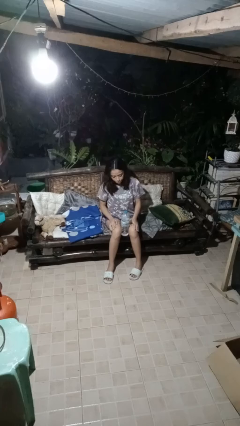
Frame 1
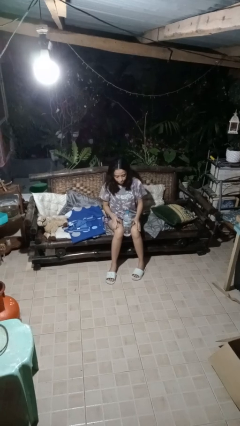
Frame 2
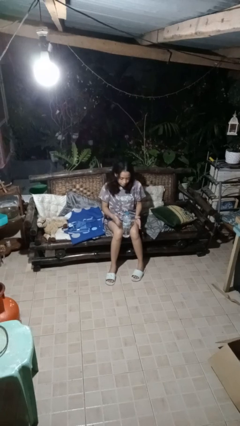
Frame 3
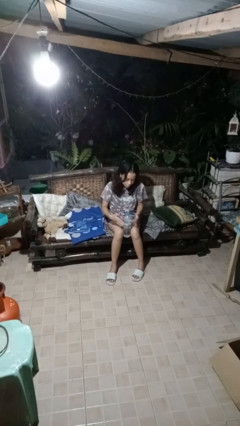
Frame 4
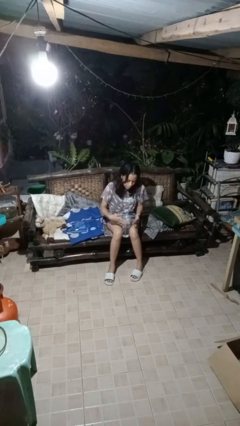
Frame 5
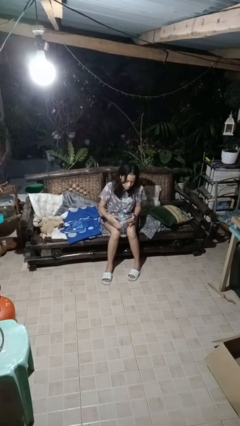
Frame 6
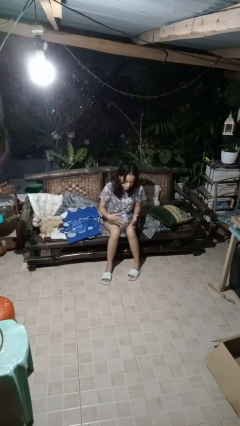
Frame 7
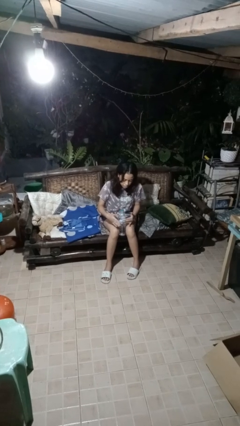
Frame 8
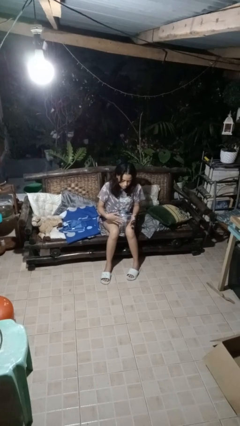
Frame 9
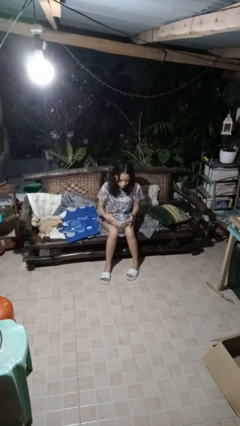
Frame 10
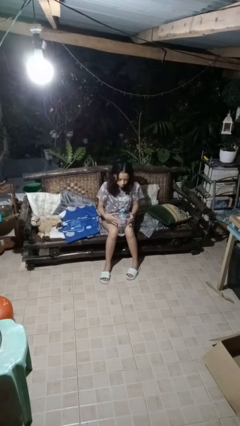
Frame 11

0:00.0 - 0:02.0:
person taps object with finger

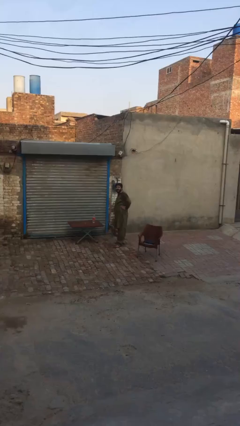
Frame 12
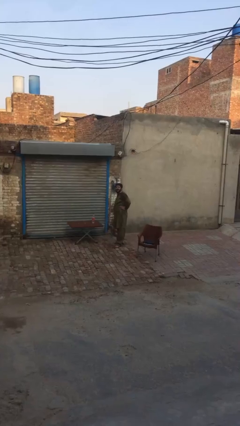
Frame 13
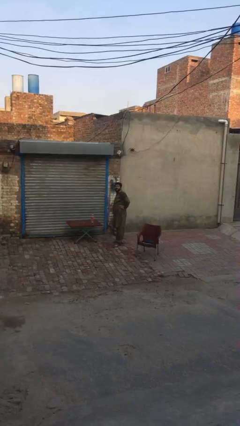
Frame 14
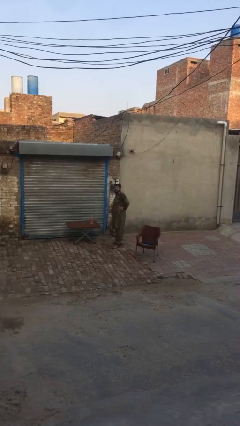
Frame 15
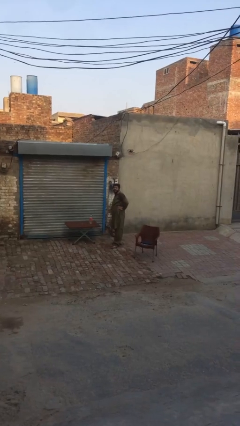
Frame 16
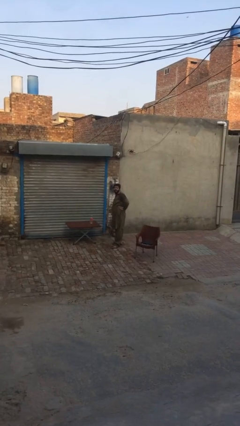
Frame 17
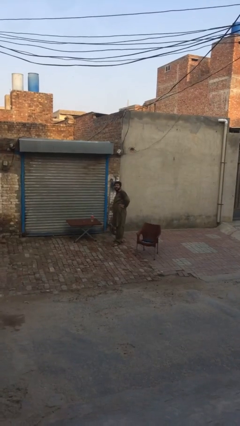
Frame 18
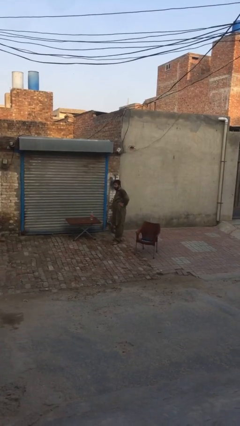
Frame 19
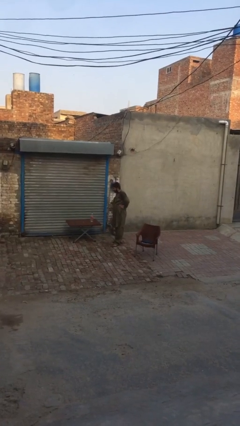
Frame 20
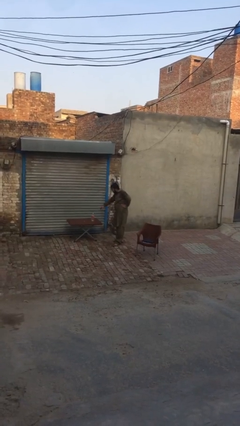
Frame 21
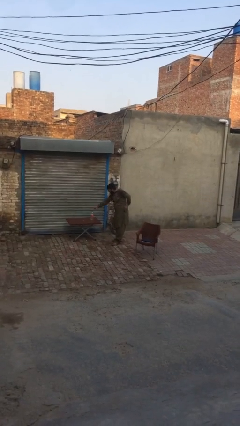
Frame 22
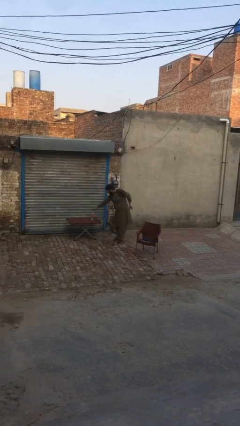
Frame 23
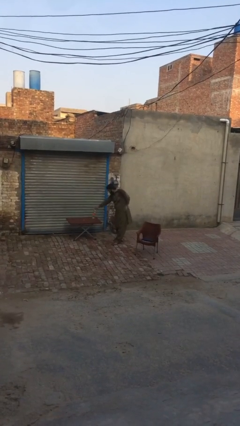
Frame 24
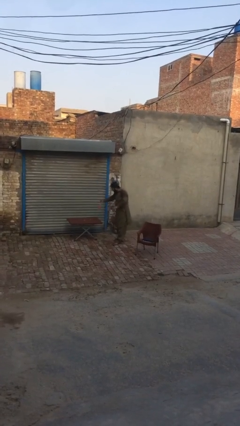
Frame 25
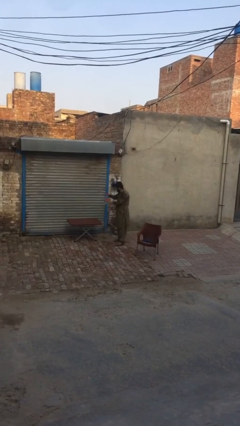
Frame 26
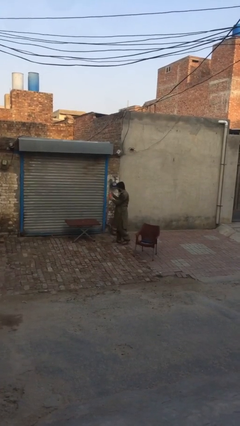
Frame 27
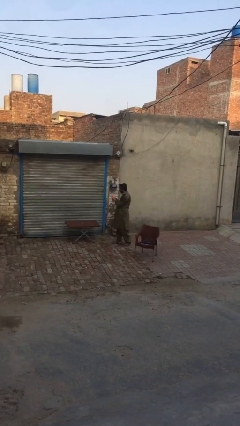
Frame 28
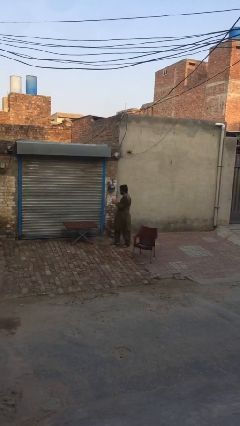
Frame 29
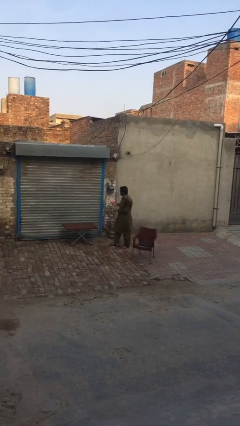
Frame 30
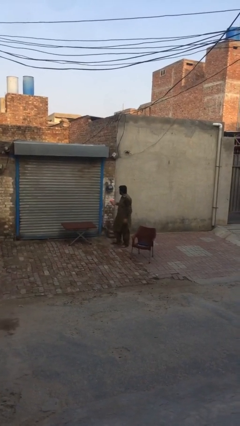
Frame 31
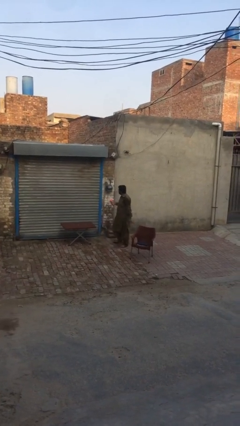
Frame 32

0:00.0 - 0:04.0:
person picks up object from table

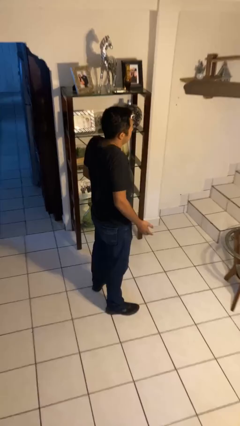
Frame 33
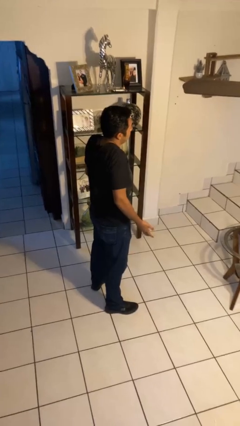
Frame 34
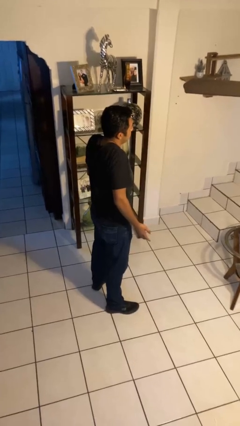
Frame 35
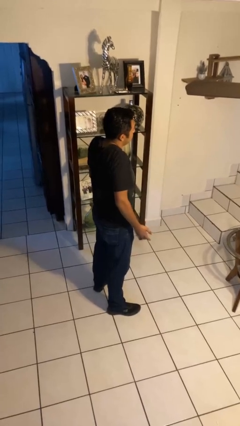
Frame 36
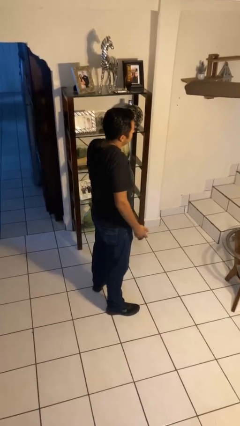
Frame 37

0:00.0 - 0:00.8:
person shrugs

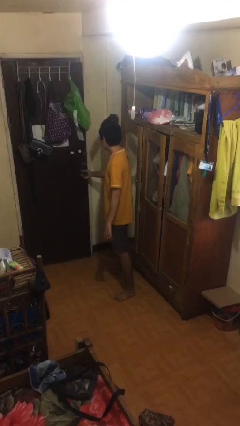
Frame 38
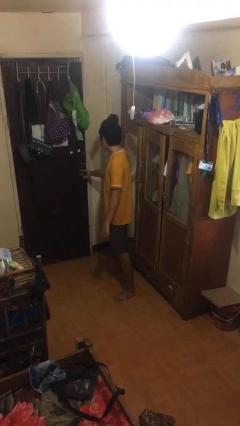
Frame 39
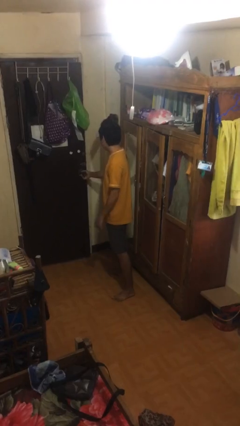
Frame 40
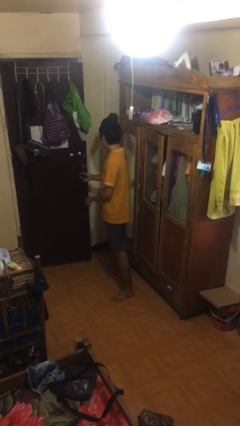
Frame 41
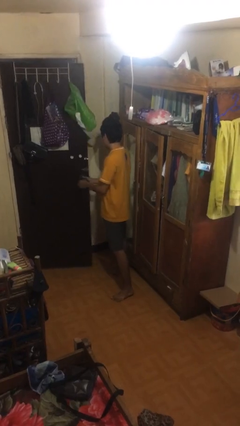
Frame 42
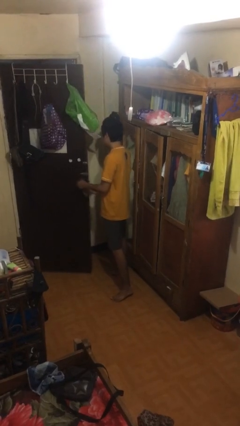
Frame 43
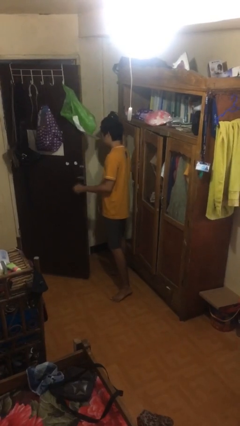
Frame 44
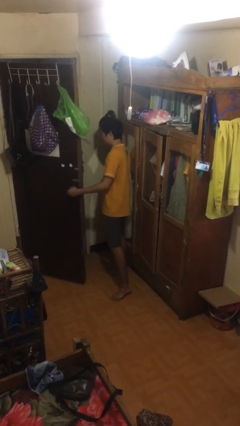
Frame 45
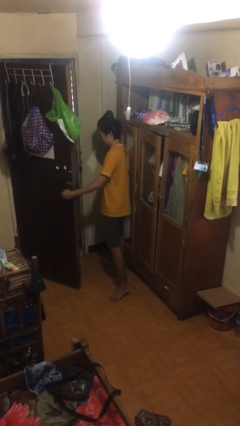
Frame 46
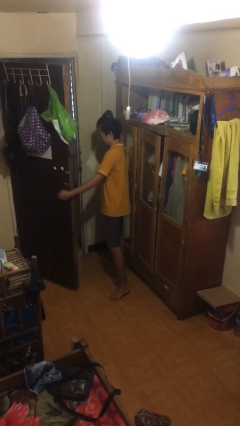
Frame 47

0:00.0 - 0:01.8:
person opens facility door

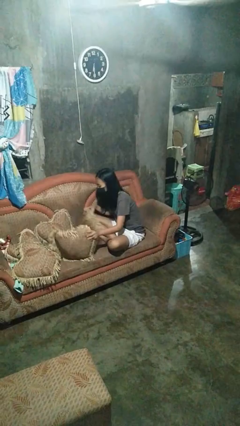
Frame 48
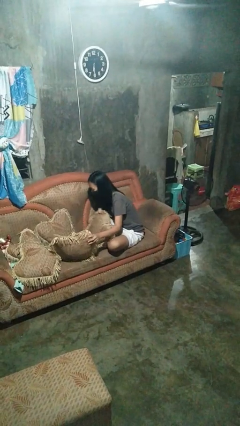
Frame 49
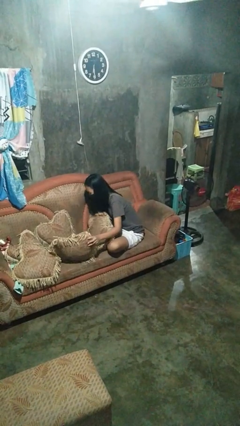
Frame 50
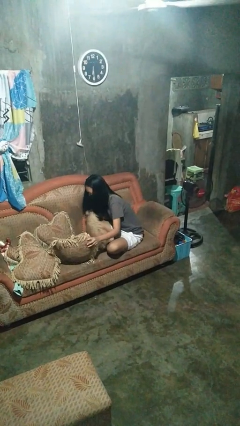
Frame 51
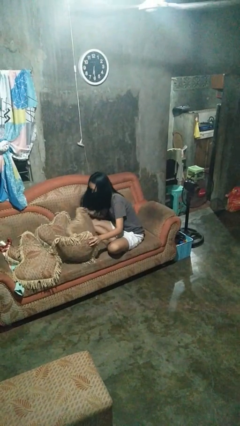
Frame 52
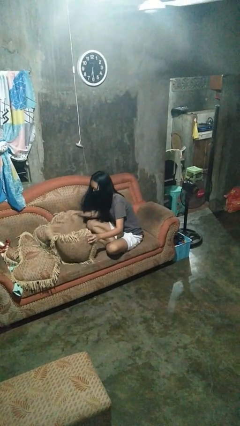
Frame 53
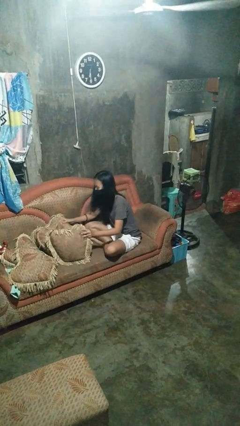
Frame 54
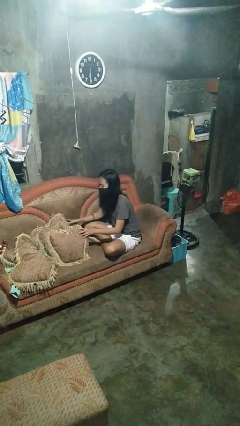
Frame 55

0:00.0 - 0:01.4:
person searches in couch

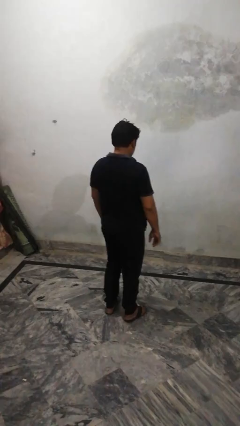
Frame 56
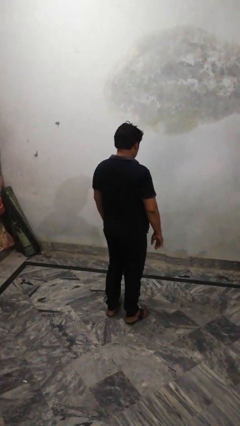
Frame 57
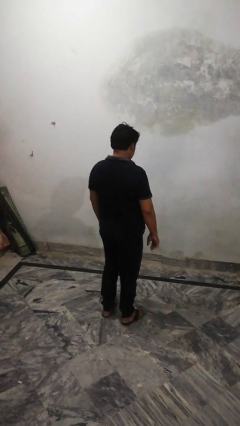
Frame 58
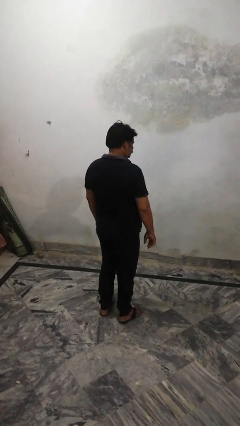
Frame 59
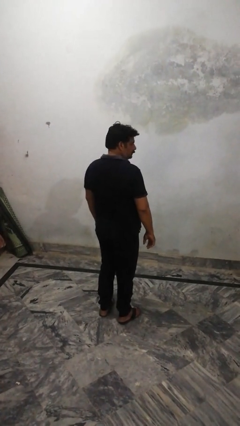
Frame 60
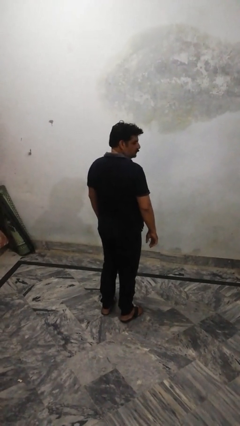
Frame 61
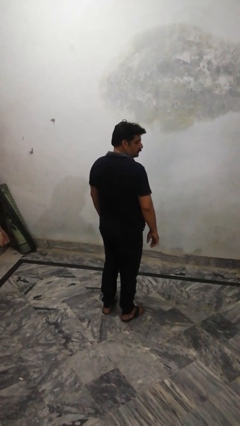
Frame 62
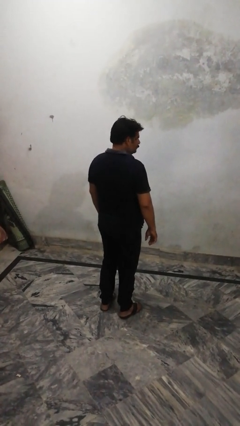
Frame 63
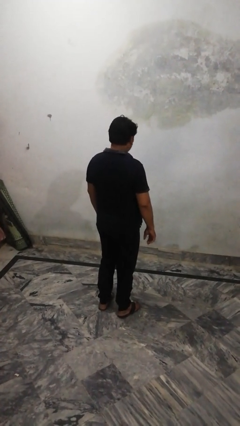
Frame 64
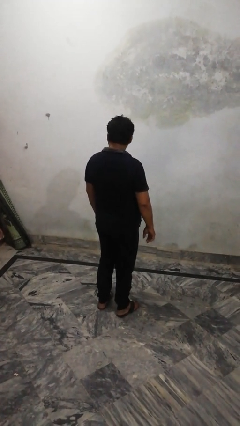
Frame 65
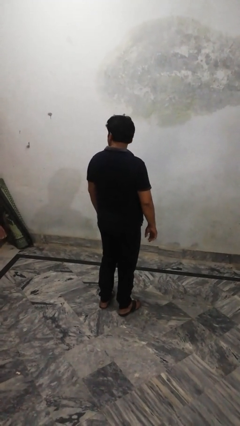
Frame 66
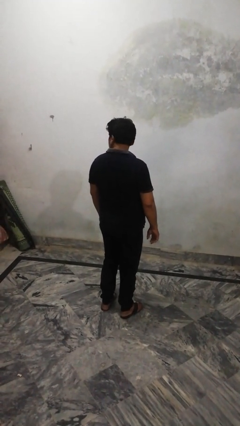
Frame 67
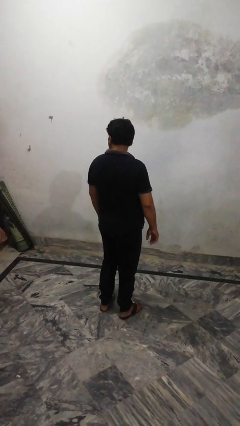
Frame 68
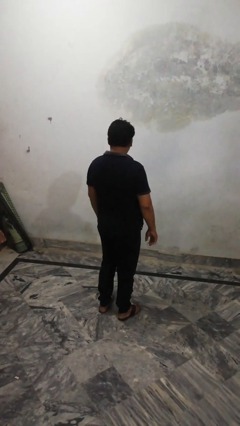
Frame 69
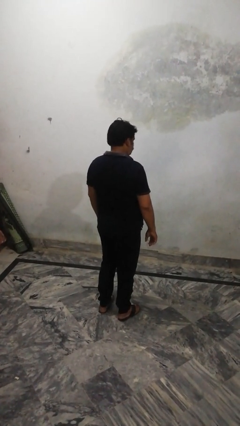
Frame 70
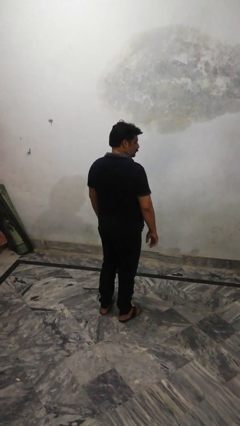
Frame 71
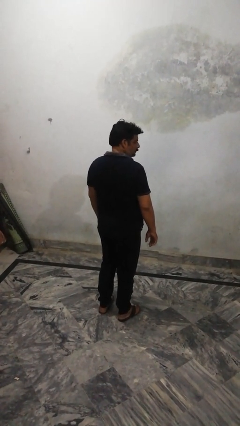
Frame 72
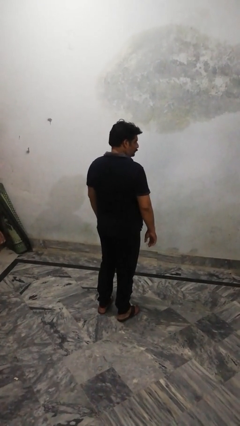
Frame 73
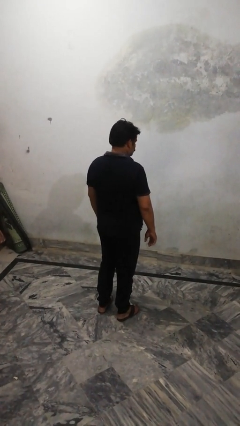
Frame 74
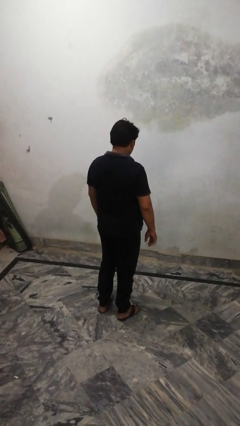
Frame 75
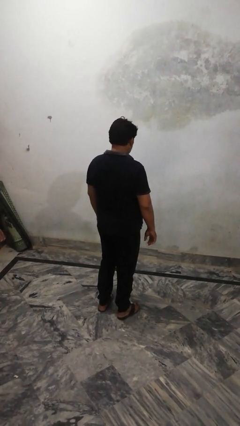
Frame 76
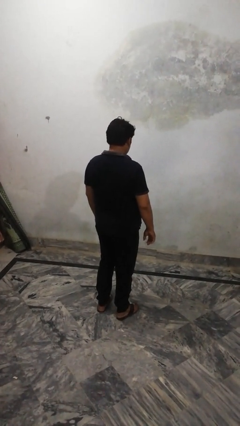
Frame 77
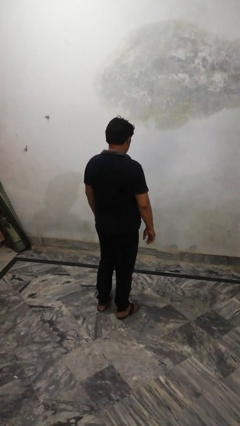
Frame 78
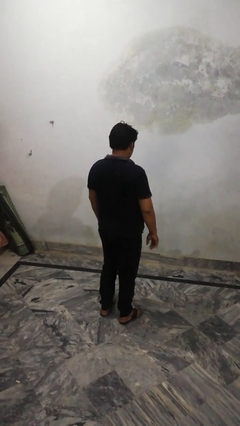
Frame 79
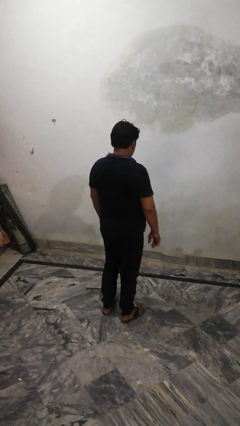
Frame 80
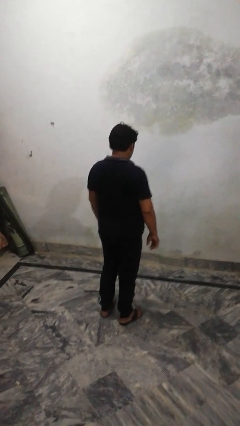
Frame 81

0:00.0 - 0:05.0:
person shakes head

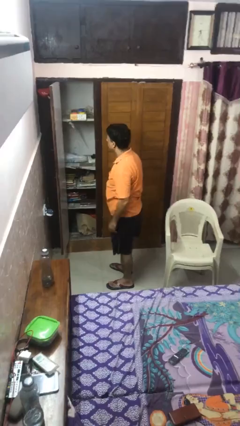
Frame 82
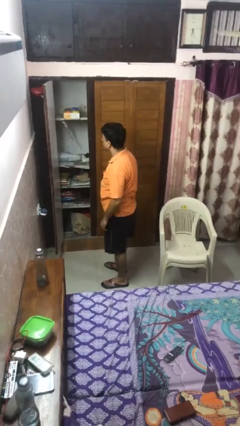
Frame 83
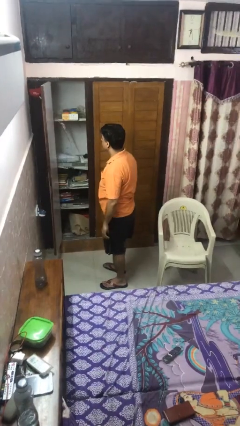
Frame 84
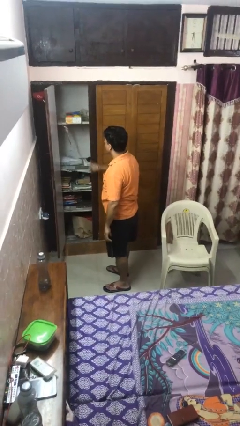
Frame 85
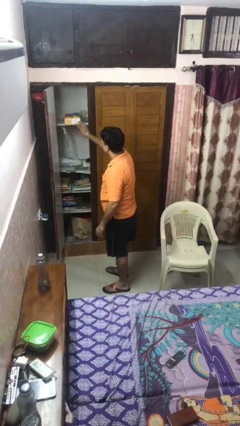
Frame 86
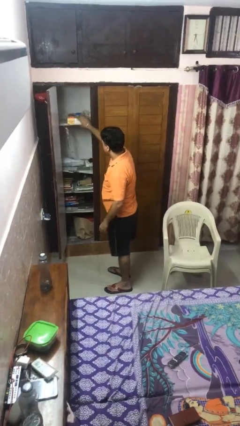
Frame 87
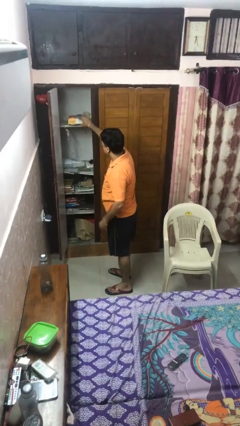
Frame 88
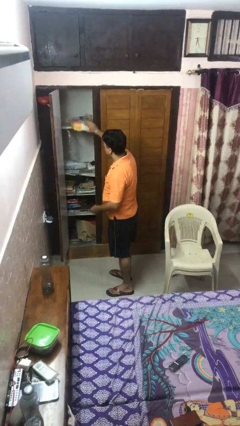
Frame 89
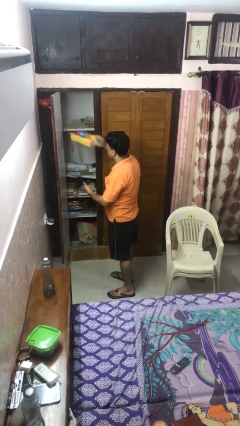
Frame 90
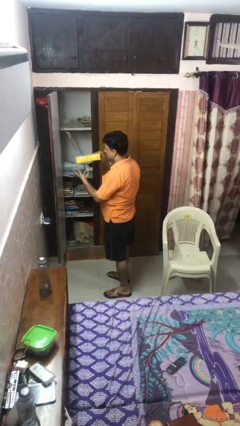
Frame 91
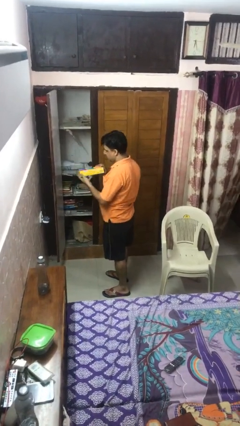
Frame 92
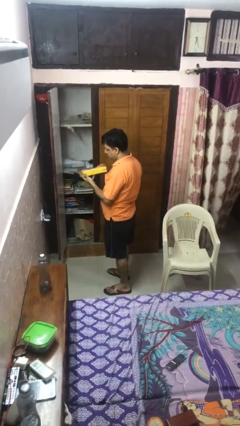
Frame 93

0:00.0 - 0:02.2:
person picks up object from shelf
